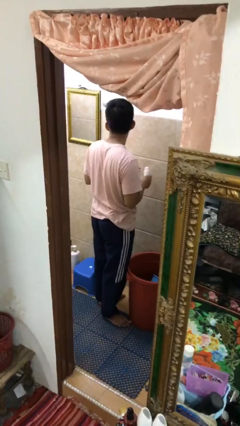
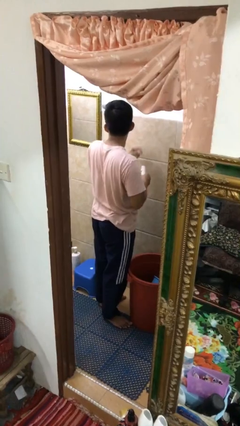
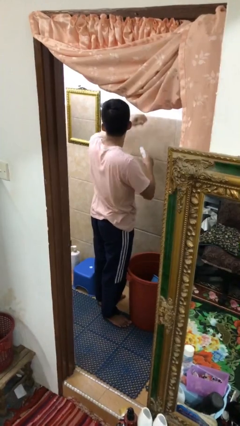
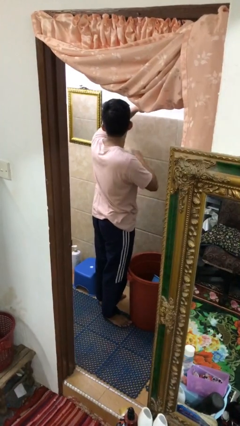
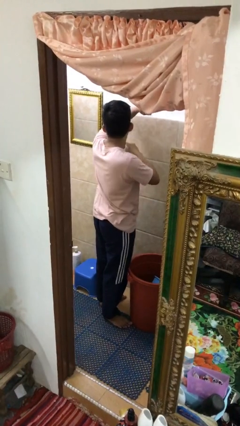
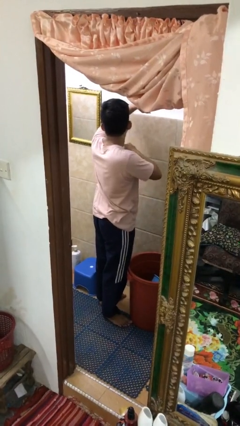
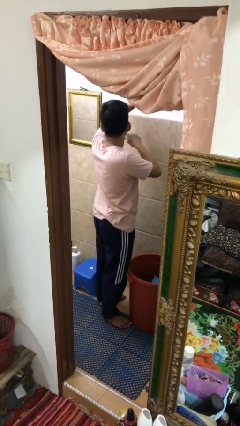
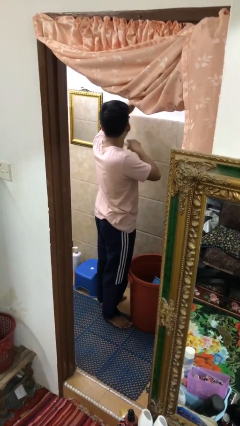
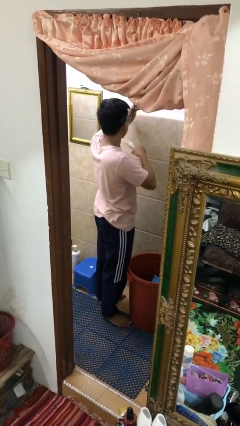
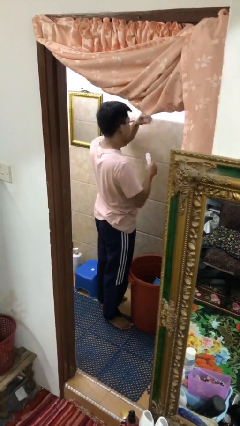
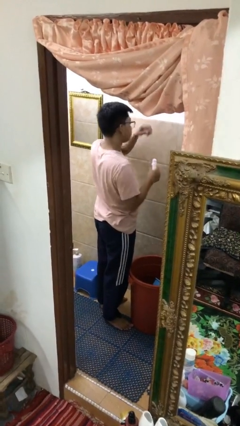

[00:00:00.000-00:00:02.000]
person applies deodorant

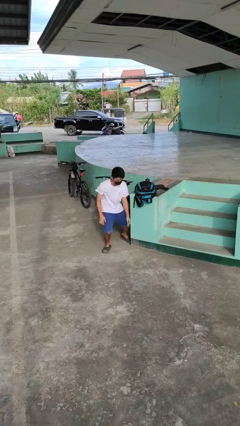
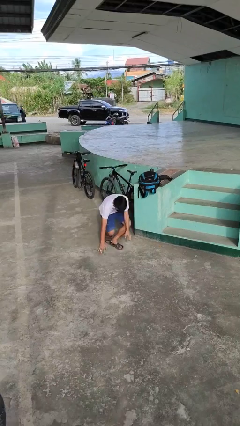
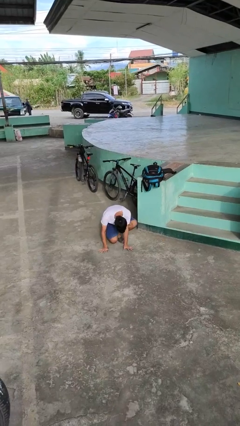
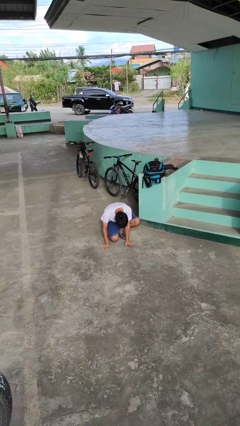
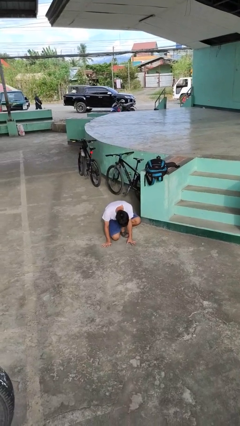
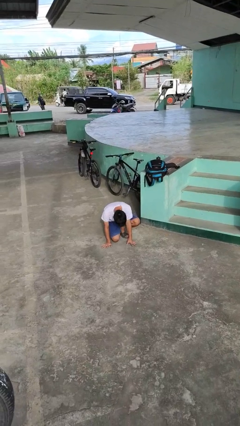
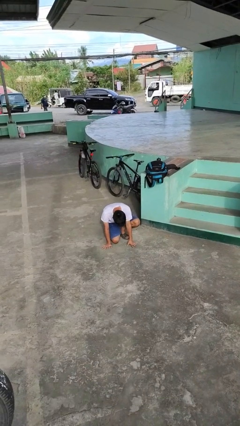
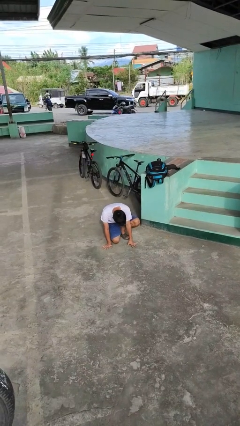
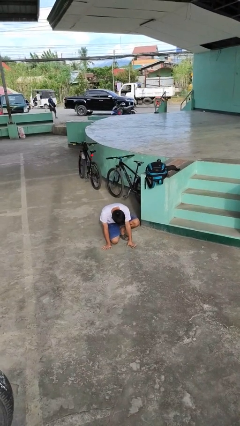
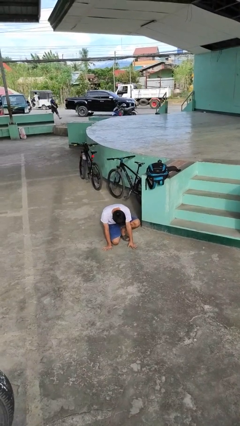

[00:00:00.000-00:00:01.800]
person trips on object on floor

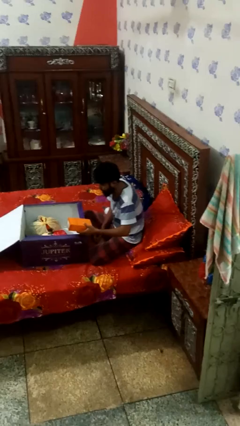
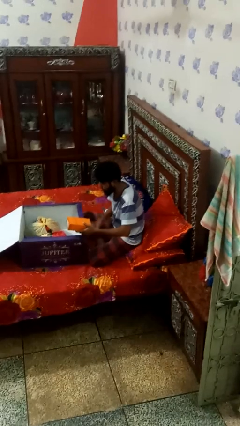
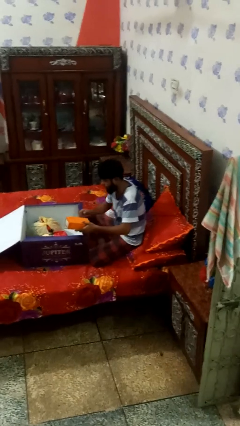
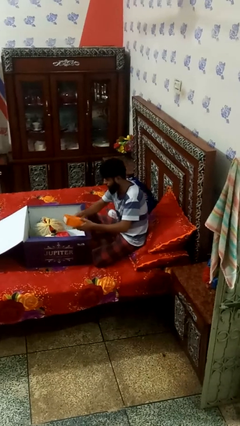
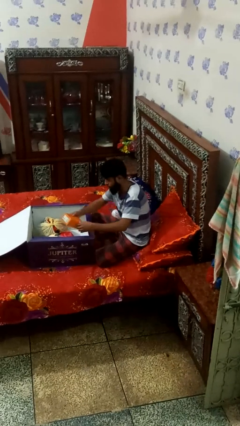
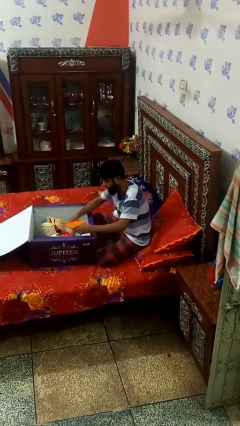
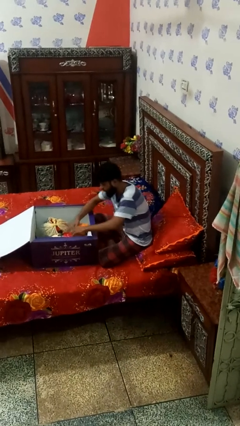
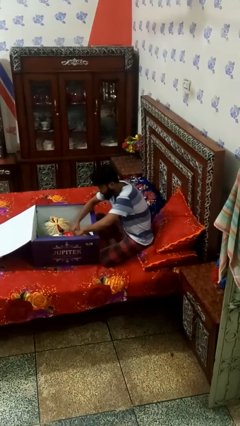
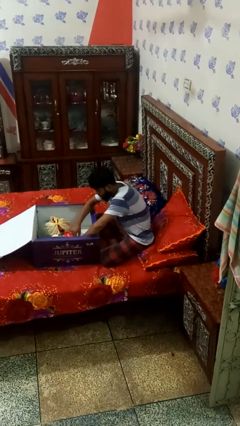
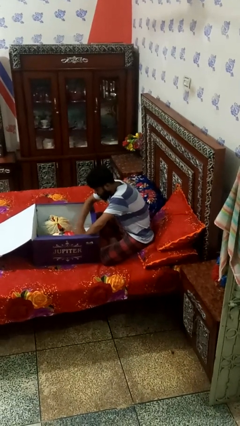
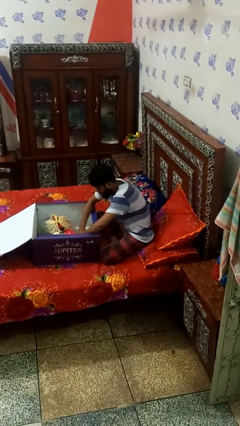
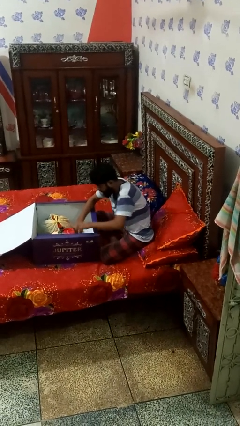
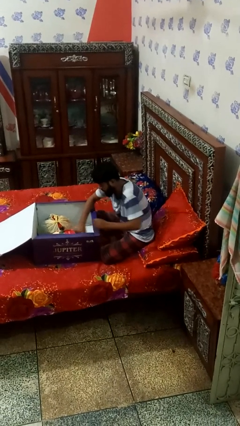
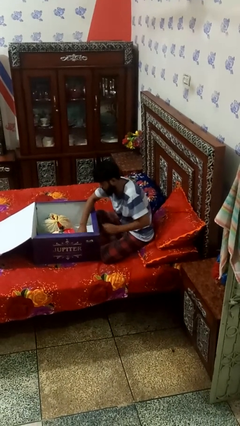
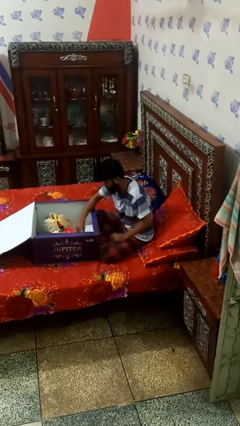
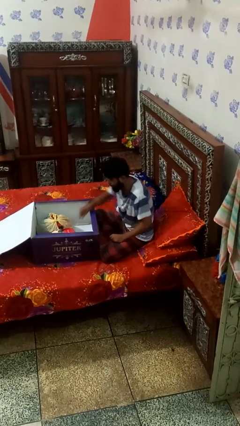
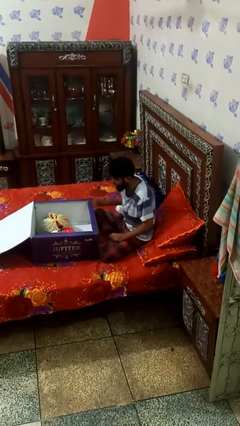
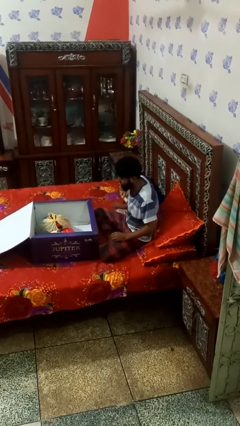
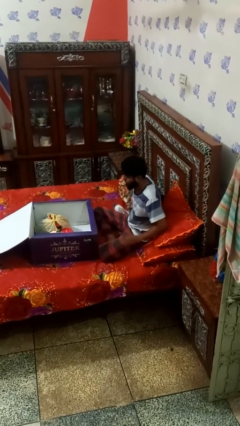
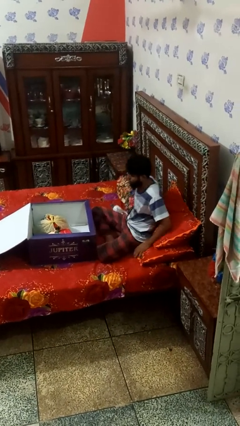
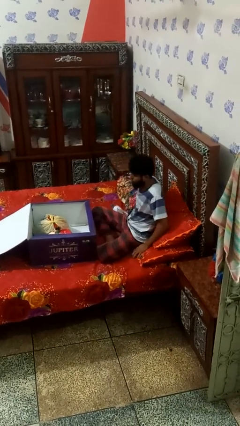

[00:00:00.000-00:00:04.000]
person puts object into box

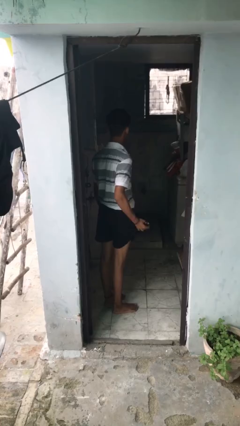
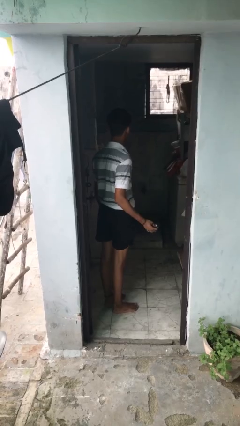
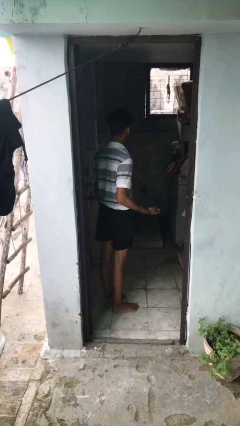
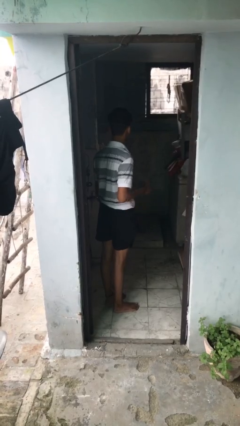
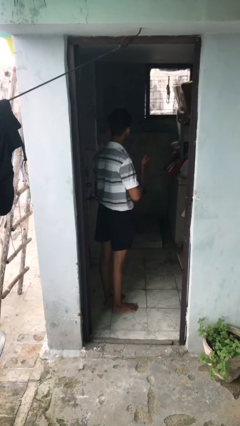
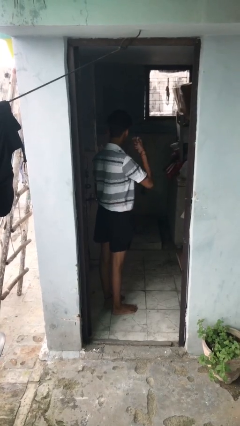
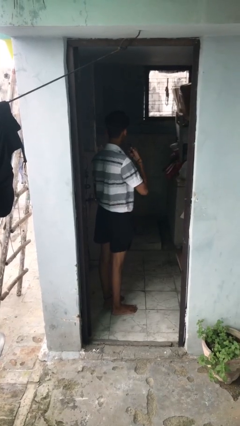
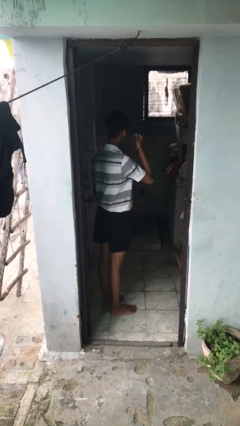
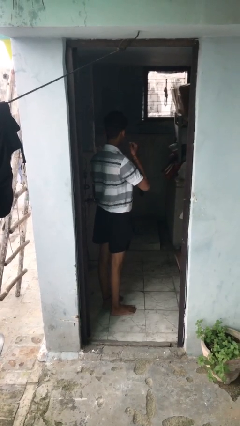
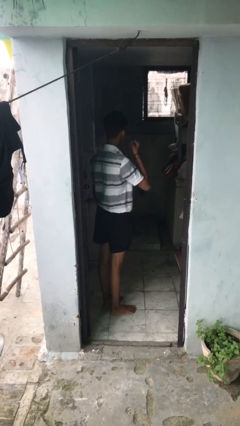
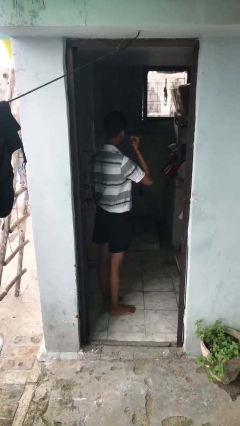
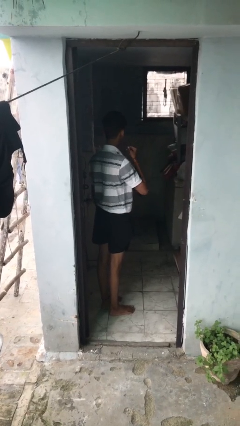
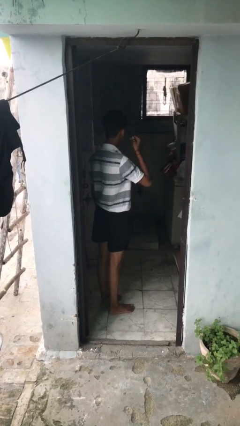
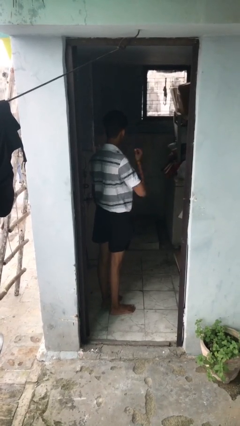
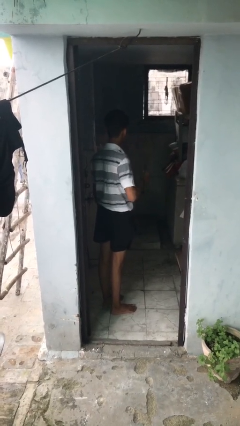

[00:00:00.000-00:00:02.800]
person shaves face

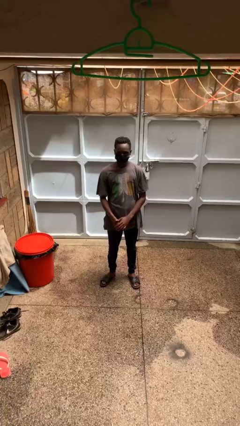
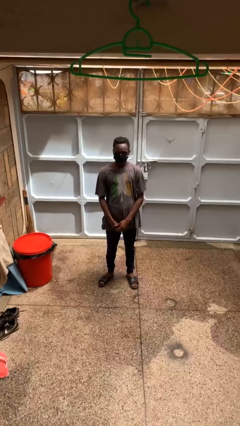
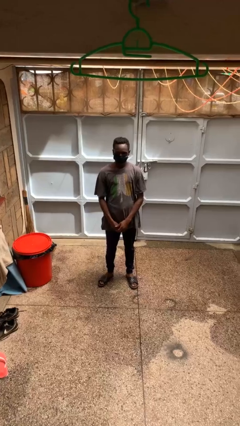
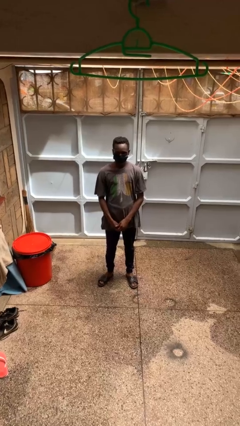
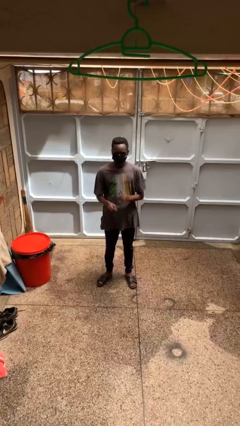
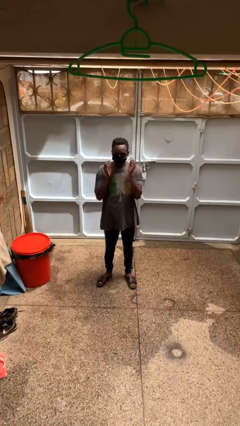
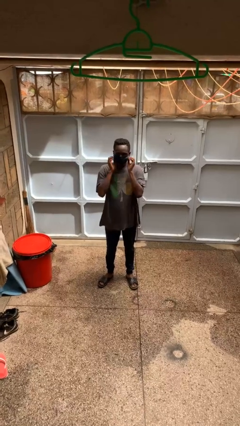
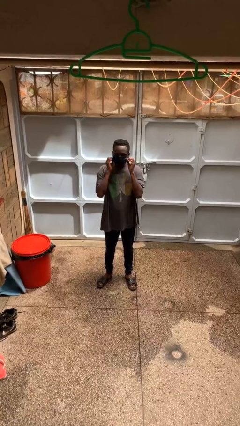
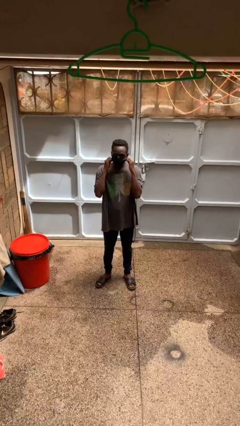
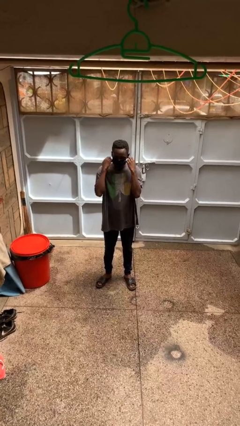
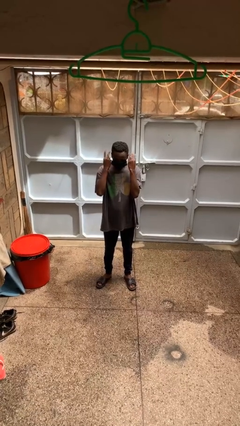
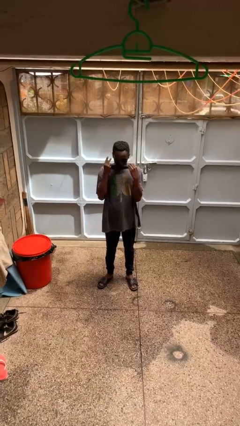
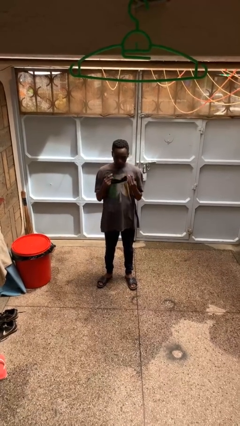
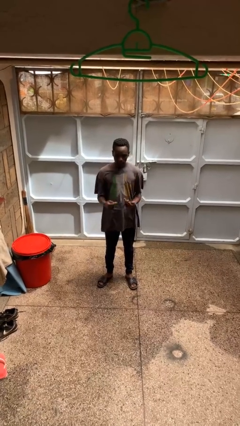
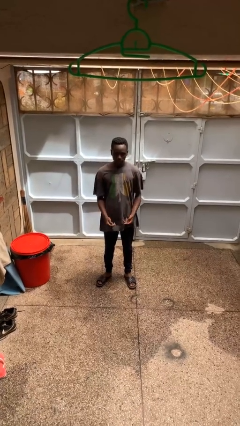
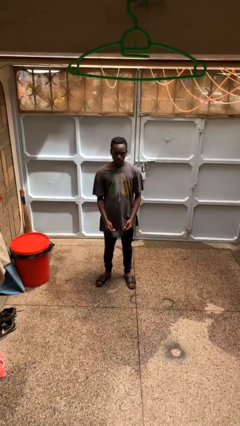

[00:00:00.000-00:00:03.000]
person takes off facemask

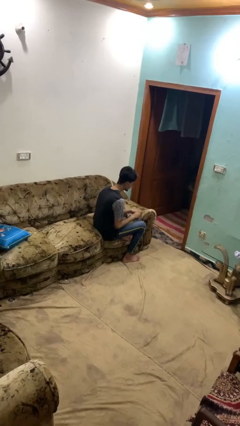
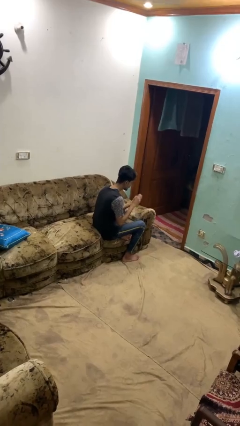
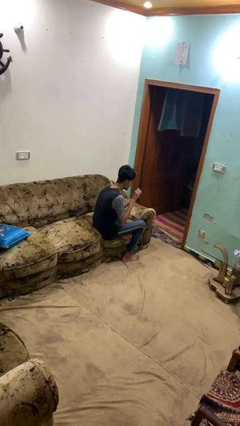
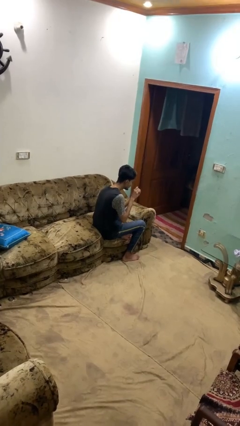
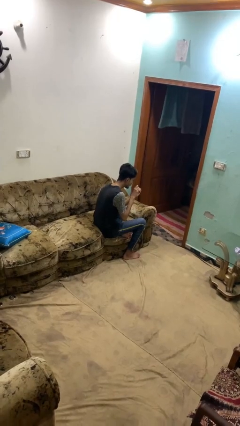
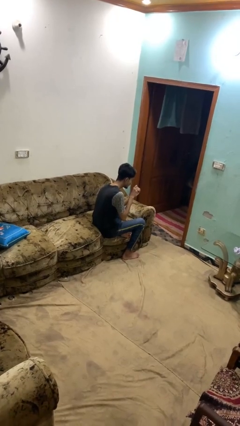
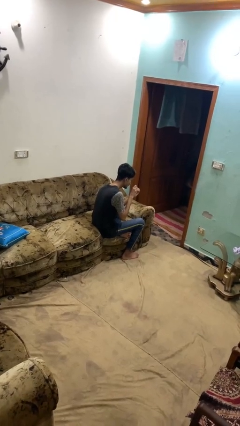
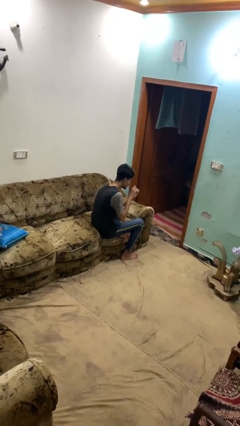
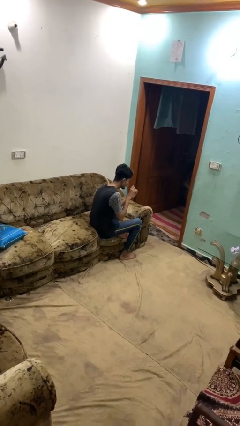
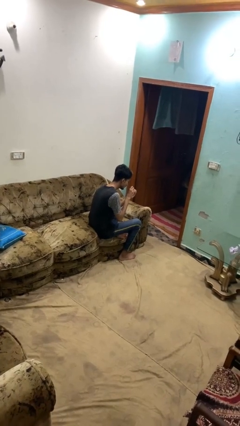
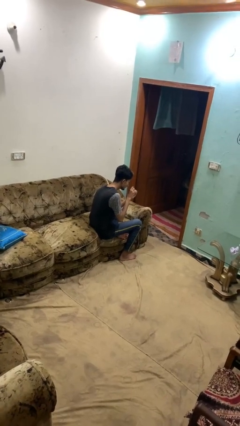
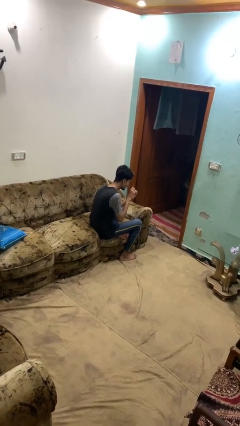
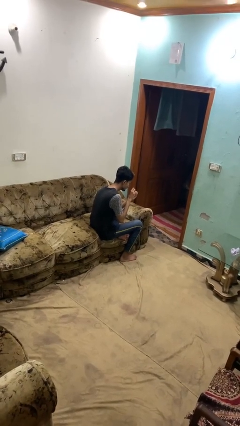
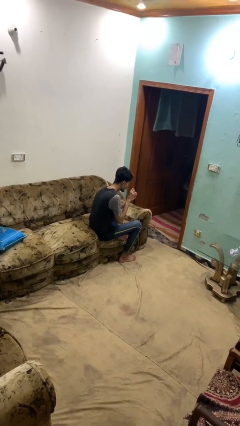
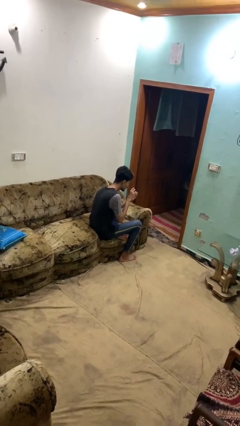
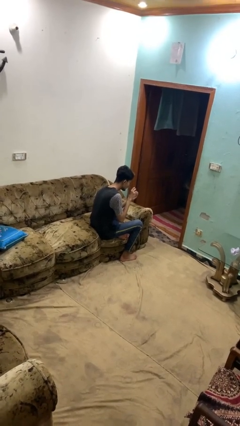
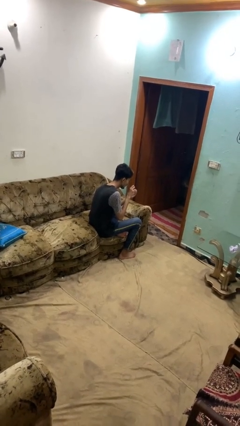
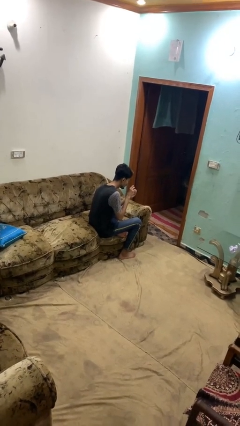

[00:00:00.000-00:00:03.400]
person clips fingernails
